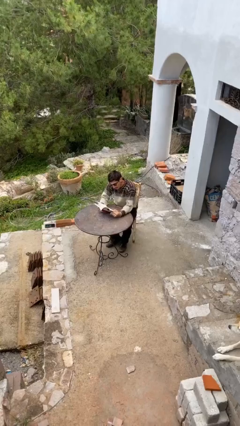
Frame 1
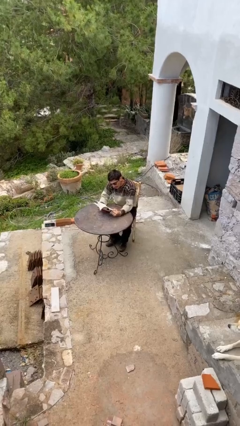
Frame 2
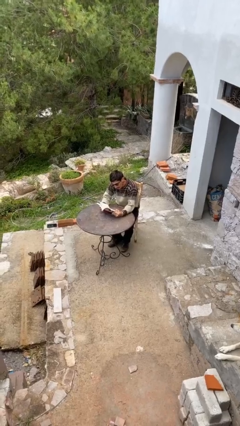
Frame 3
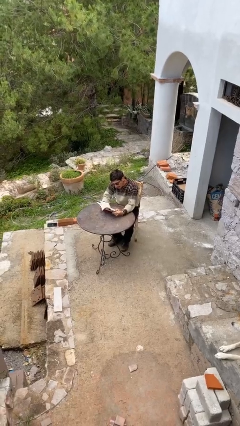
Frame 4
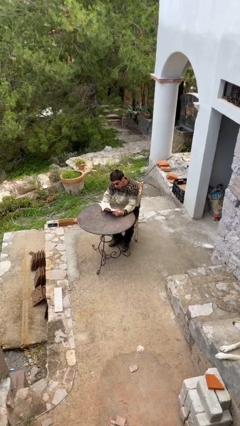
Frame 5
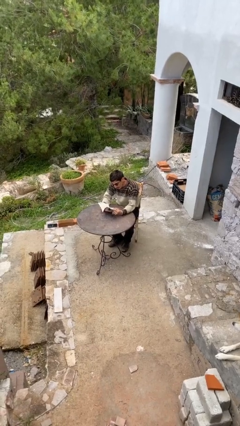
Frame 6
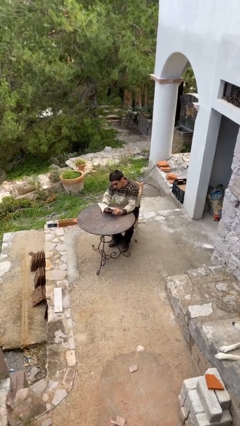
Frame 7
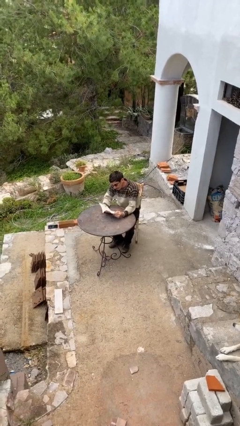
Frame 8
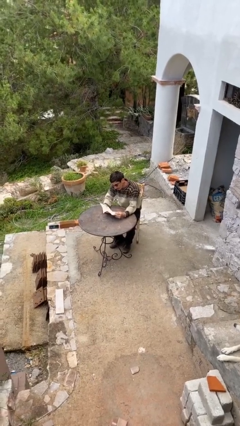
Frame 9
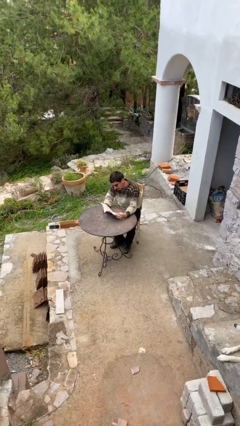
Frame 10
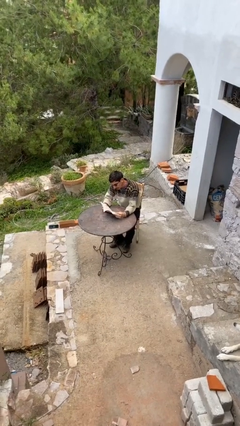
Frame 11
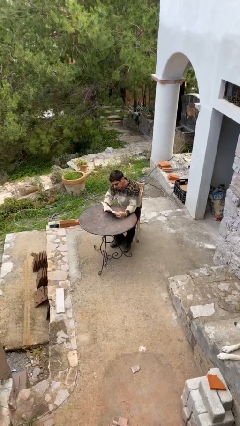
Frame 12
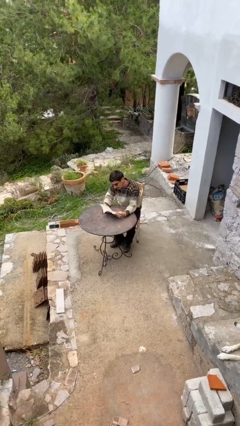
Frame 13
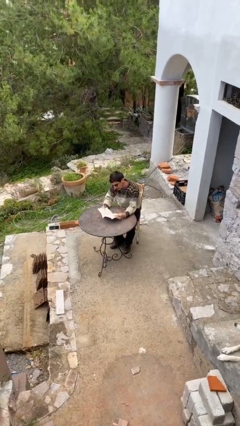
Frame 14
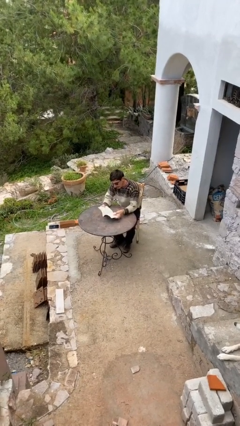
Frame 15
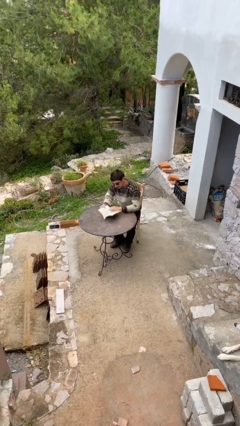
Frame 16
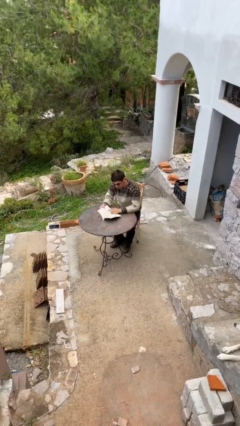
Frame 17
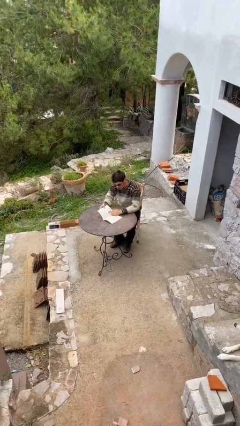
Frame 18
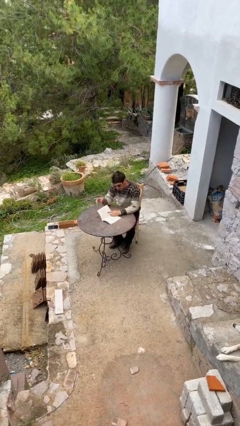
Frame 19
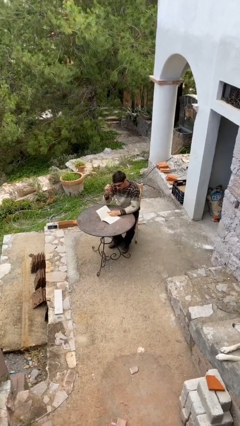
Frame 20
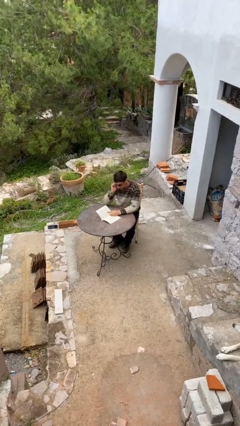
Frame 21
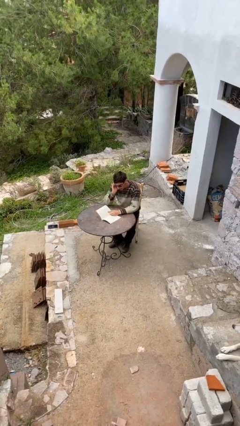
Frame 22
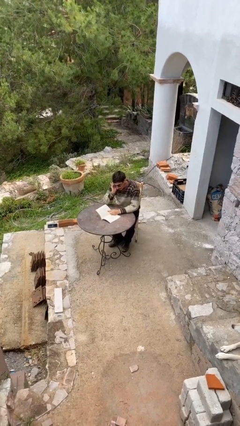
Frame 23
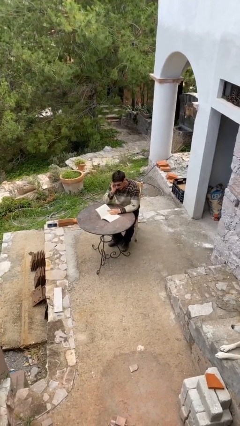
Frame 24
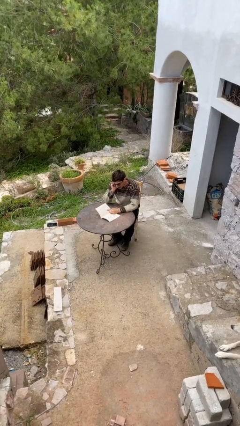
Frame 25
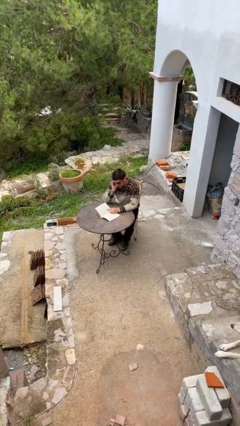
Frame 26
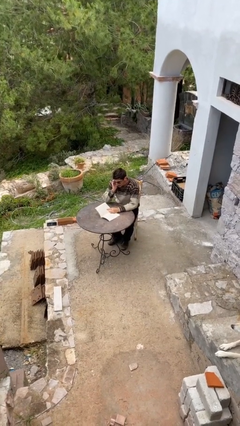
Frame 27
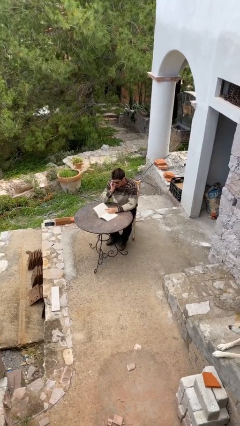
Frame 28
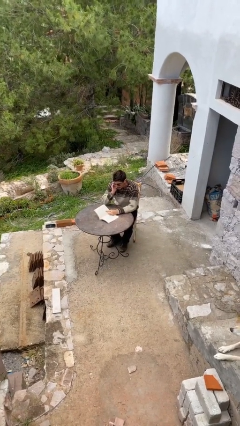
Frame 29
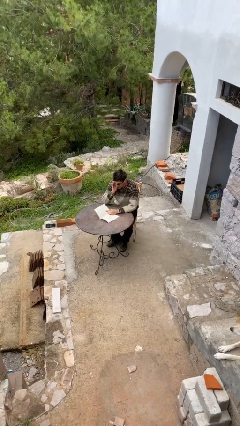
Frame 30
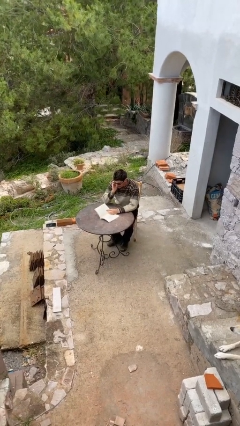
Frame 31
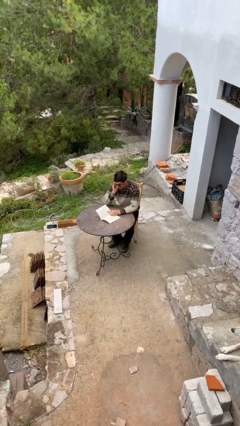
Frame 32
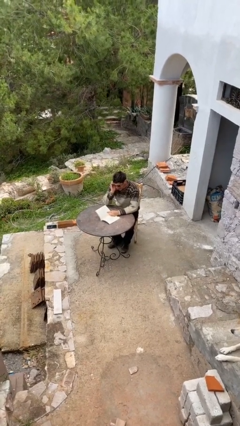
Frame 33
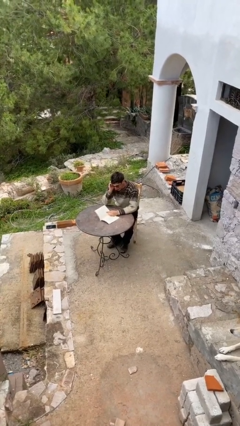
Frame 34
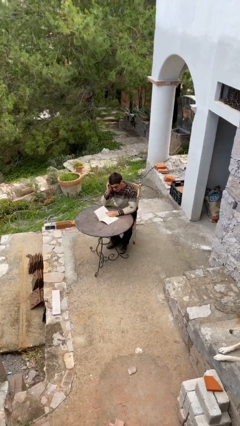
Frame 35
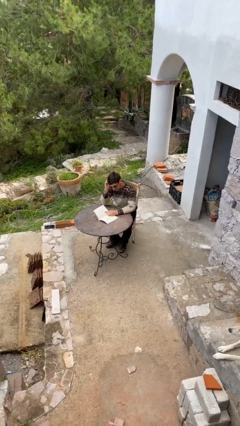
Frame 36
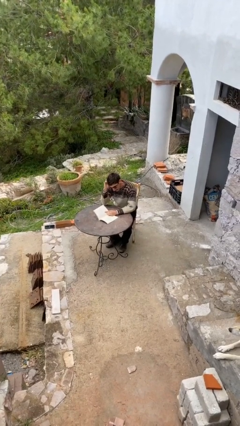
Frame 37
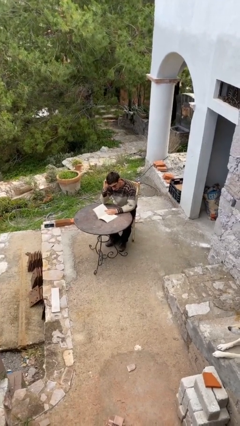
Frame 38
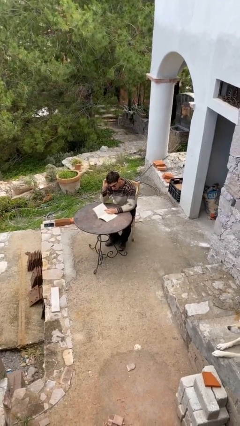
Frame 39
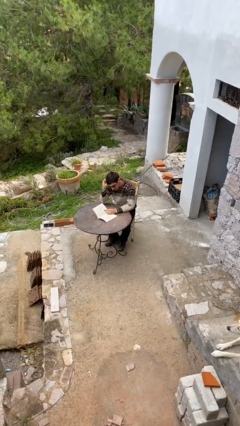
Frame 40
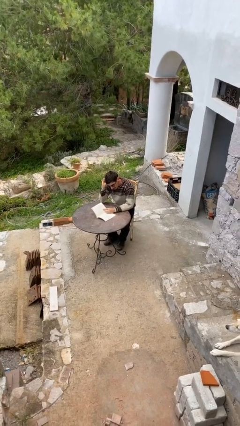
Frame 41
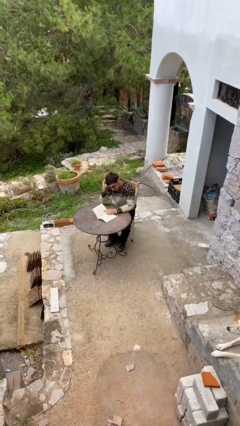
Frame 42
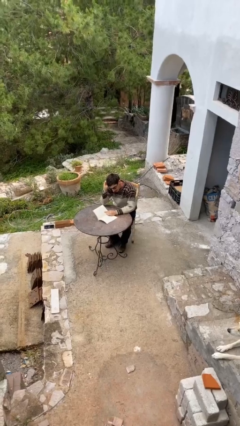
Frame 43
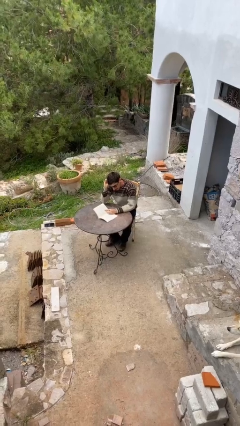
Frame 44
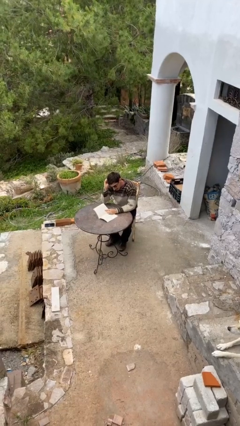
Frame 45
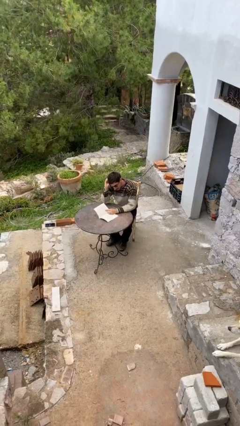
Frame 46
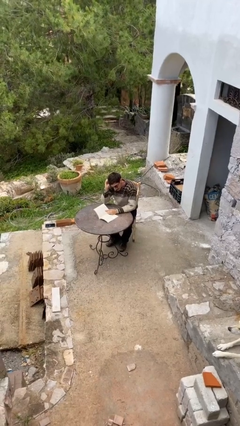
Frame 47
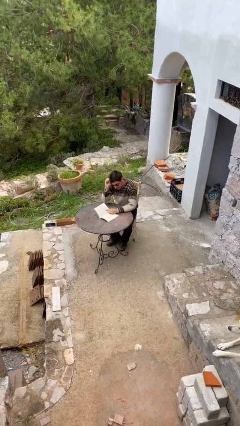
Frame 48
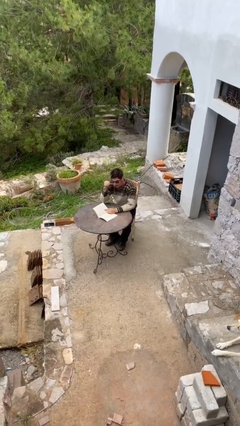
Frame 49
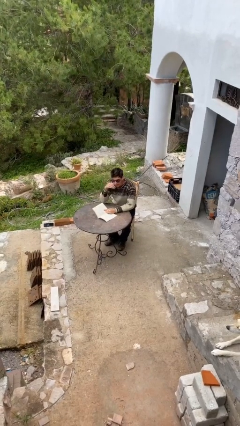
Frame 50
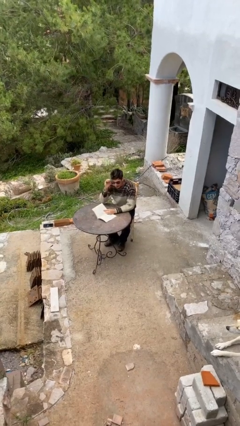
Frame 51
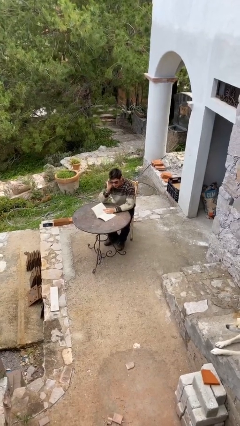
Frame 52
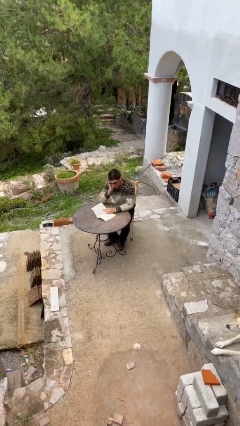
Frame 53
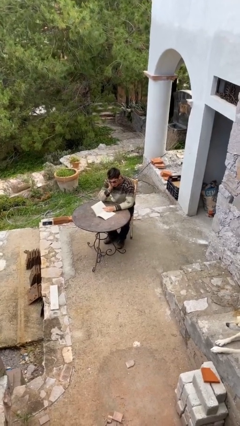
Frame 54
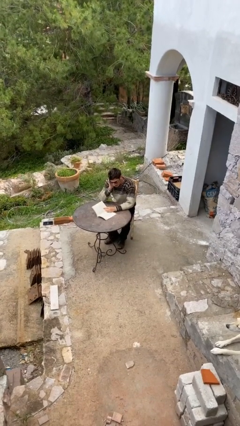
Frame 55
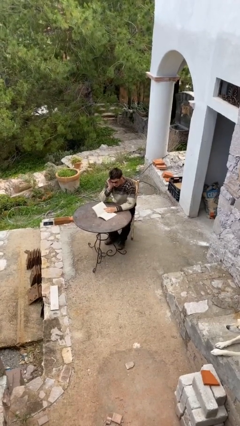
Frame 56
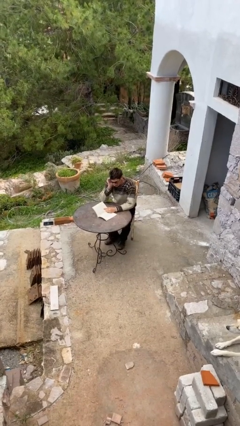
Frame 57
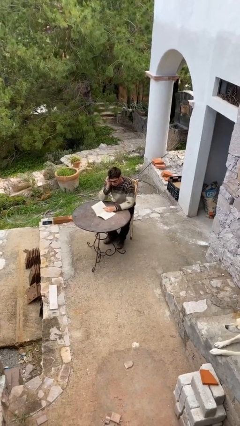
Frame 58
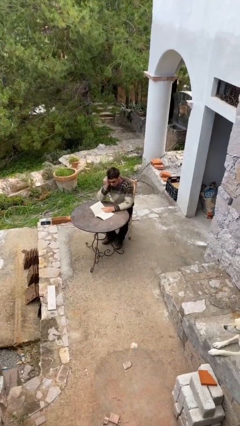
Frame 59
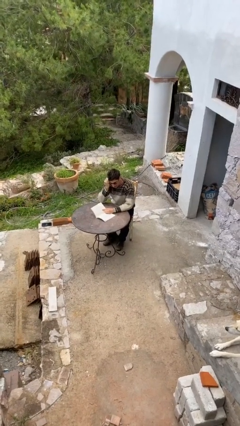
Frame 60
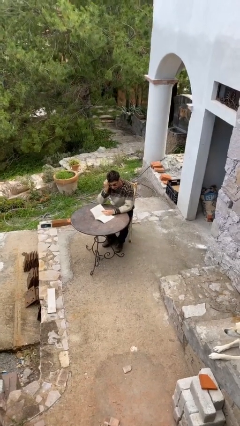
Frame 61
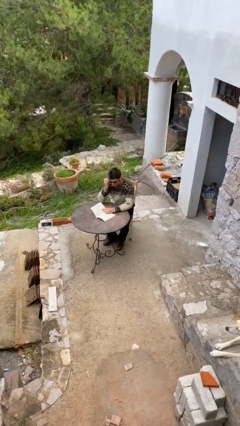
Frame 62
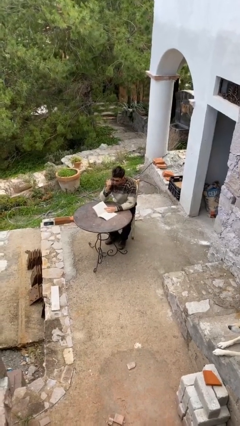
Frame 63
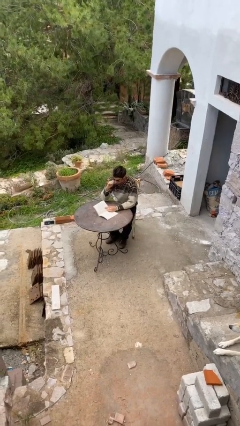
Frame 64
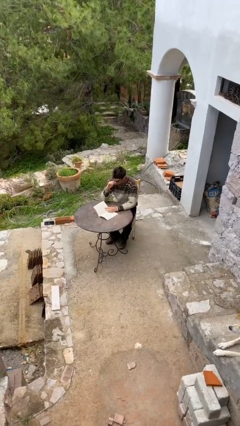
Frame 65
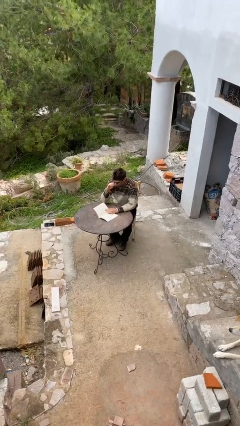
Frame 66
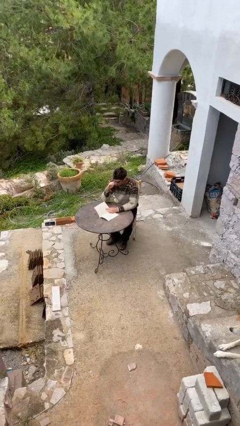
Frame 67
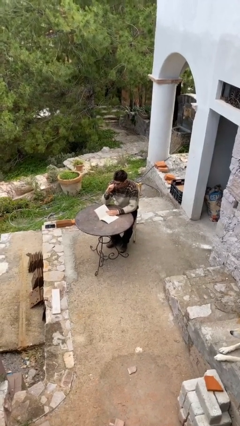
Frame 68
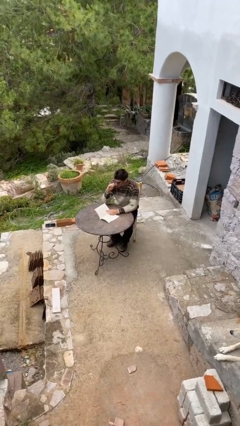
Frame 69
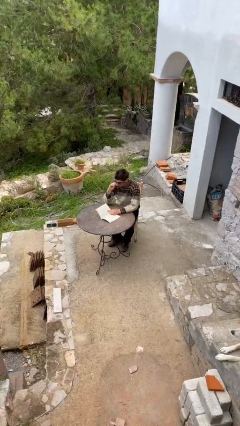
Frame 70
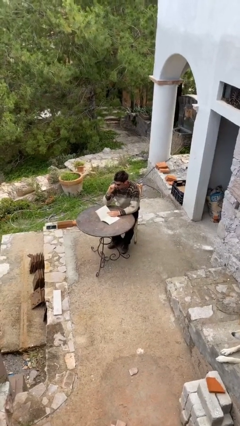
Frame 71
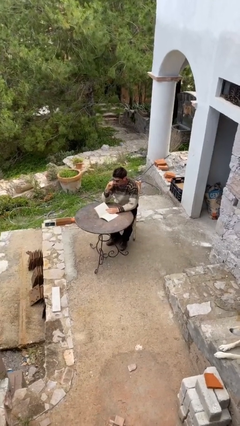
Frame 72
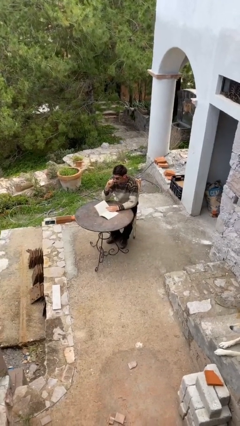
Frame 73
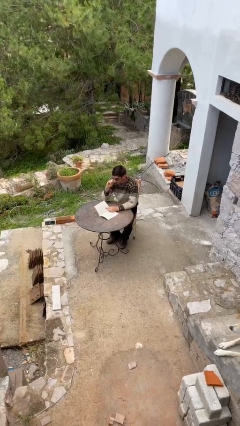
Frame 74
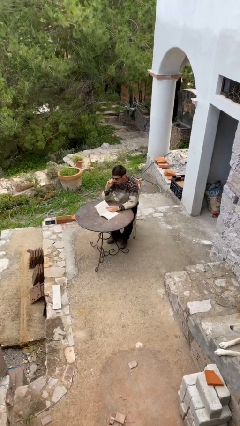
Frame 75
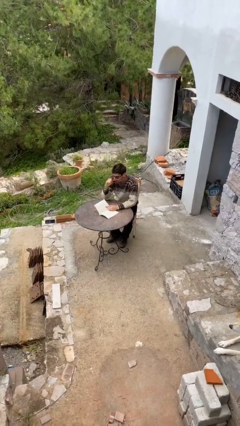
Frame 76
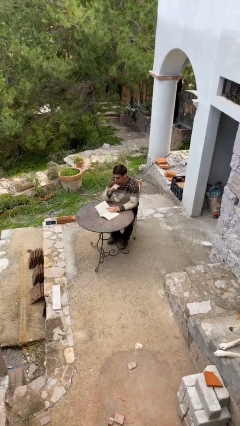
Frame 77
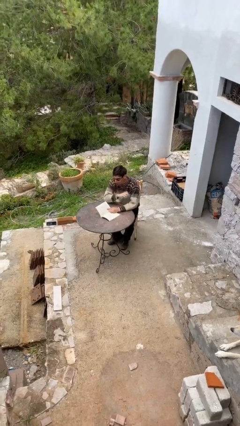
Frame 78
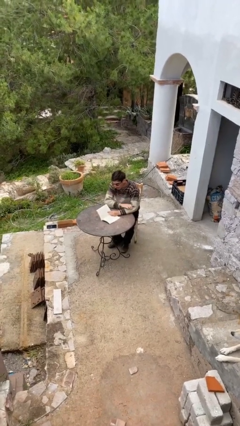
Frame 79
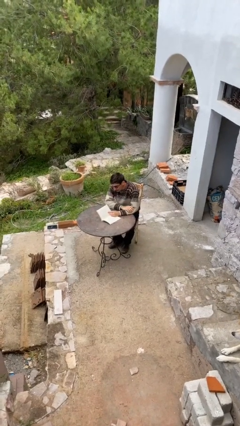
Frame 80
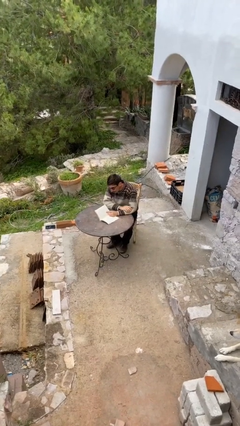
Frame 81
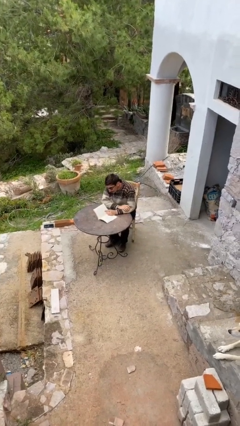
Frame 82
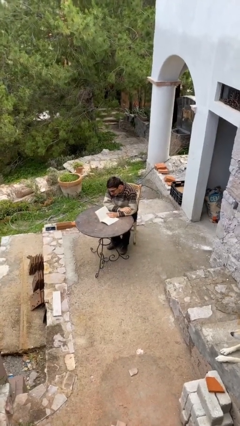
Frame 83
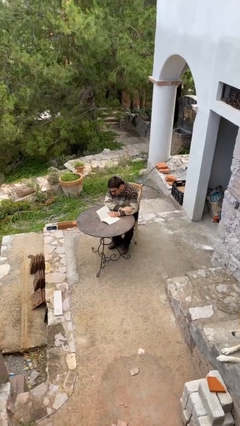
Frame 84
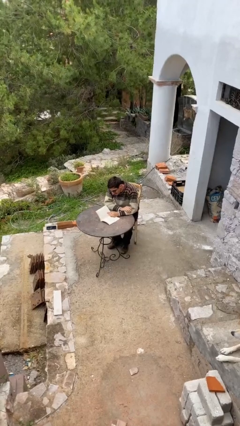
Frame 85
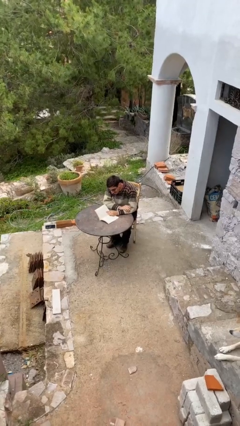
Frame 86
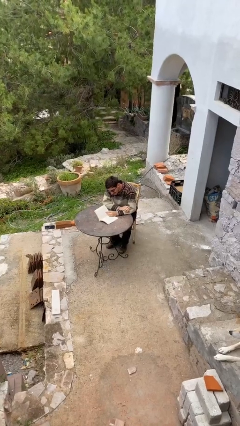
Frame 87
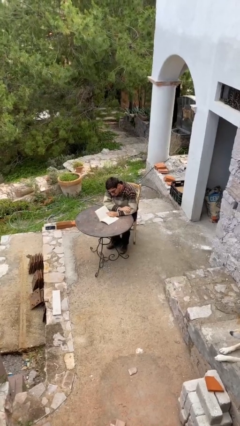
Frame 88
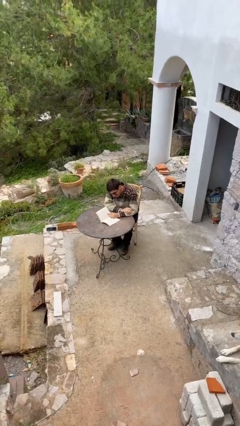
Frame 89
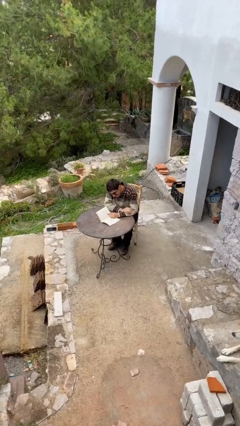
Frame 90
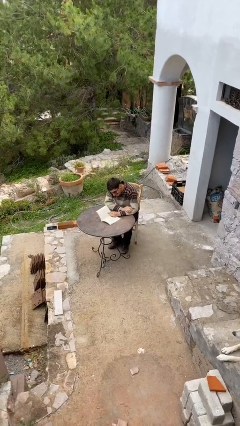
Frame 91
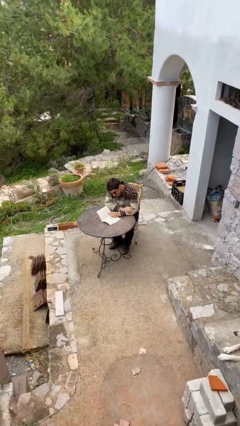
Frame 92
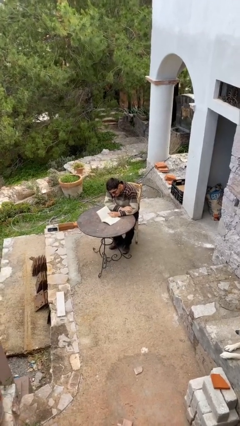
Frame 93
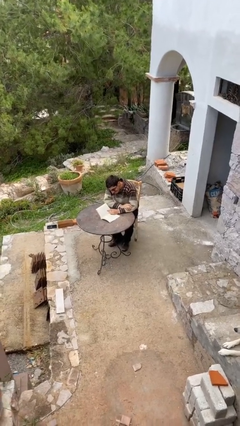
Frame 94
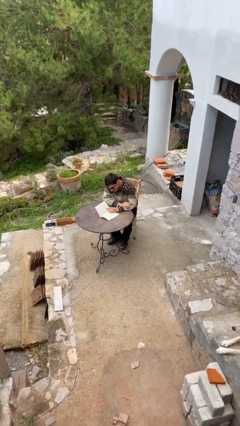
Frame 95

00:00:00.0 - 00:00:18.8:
person reads document
